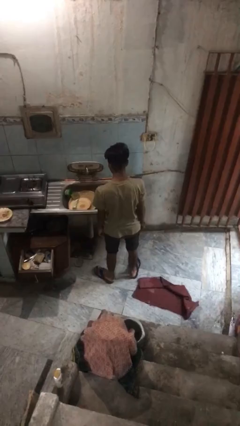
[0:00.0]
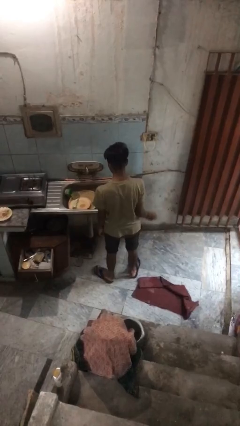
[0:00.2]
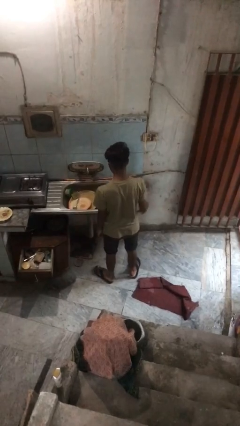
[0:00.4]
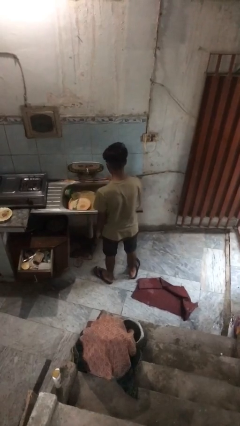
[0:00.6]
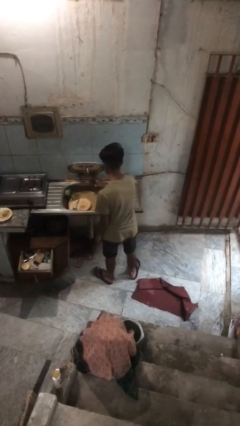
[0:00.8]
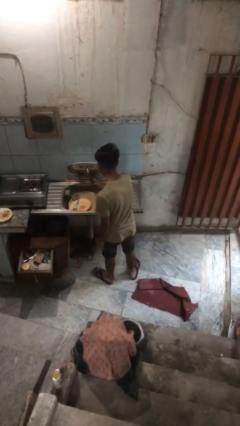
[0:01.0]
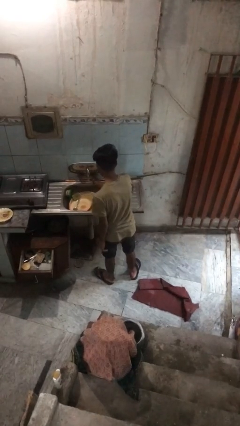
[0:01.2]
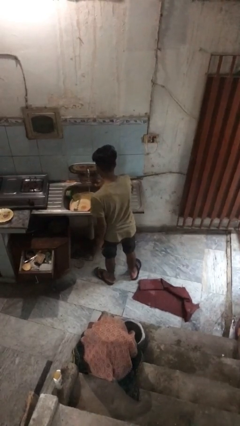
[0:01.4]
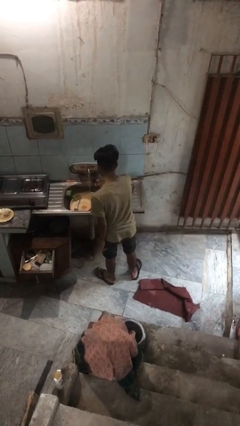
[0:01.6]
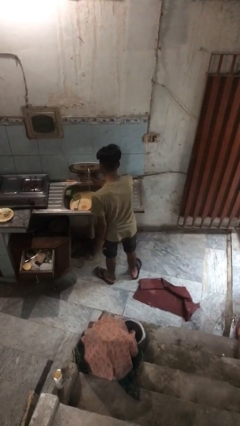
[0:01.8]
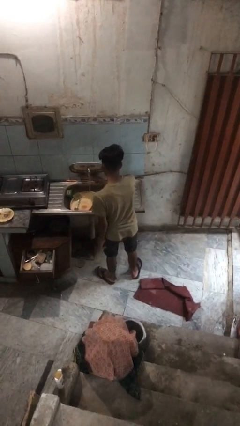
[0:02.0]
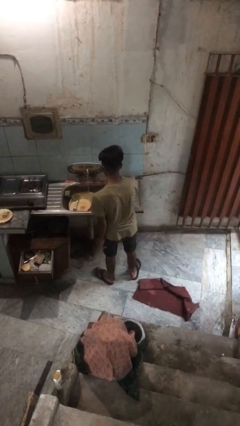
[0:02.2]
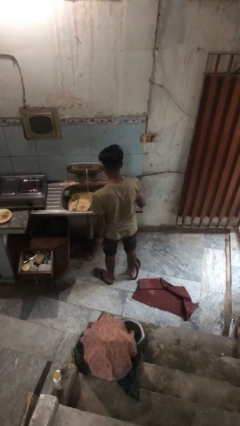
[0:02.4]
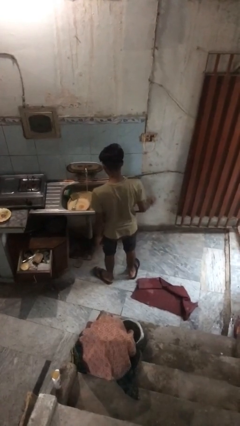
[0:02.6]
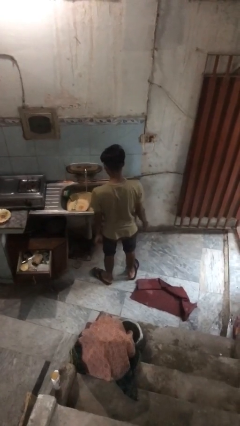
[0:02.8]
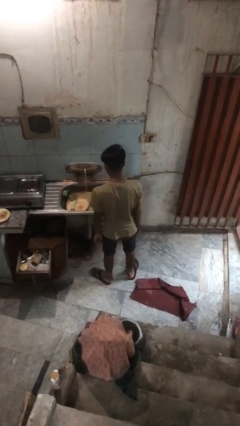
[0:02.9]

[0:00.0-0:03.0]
person turns on faucet

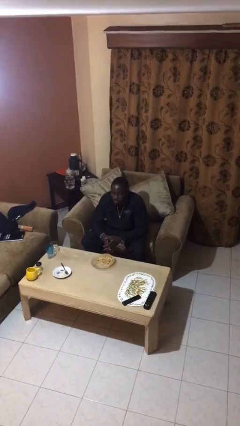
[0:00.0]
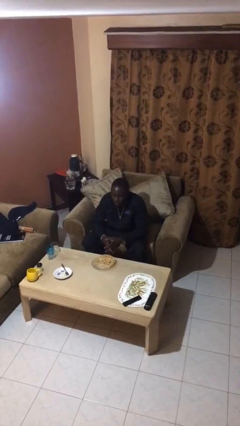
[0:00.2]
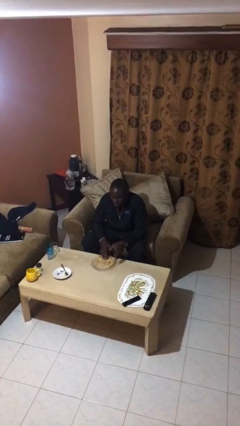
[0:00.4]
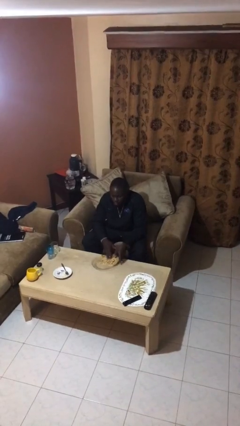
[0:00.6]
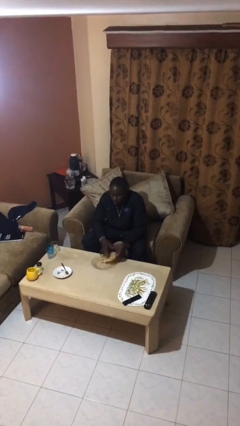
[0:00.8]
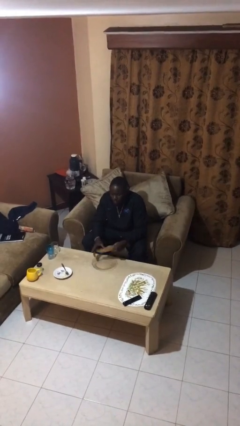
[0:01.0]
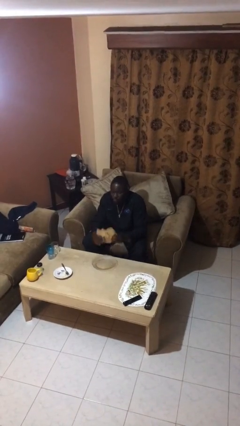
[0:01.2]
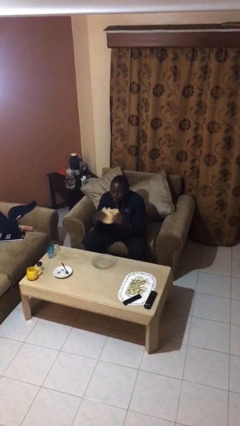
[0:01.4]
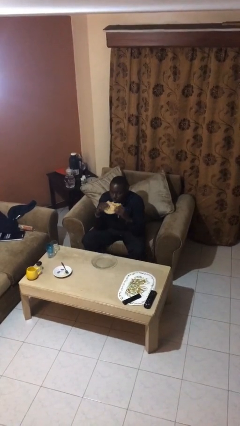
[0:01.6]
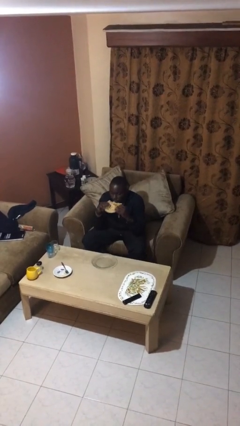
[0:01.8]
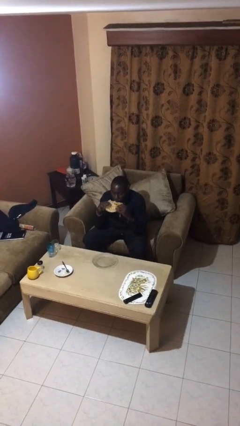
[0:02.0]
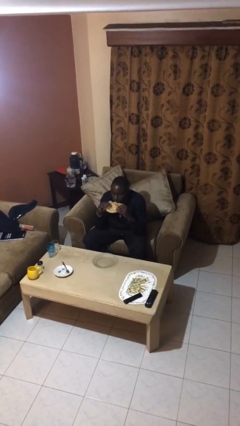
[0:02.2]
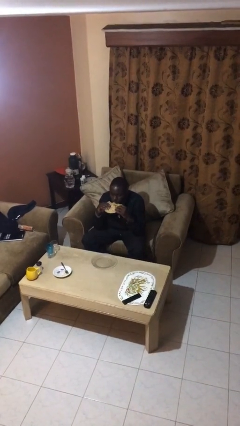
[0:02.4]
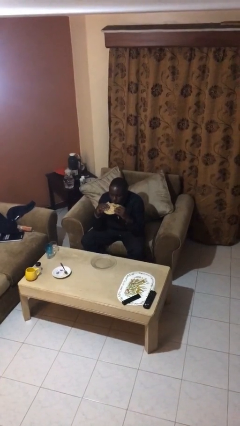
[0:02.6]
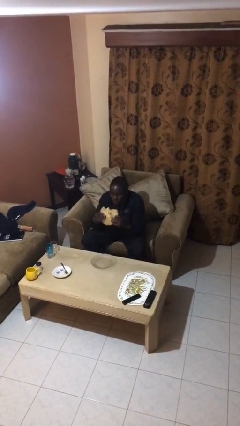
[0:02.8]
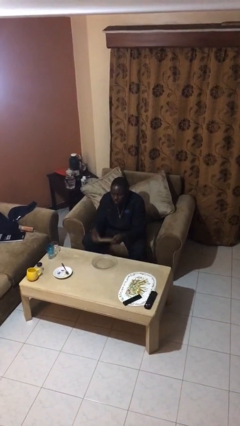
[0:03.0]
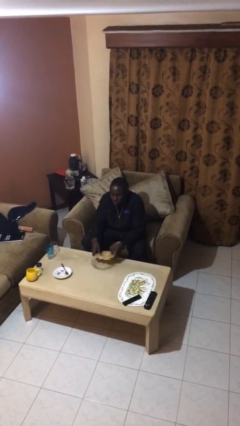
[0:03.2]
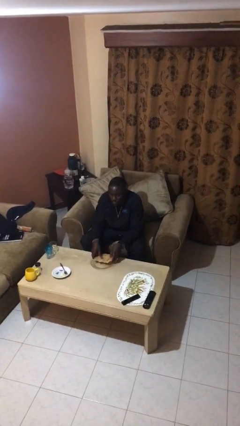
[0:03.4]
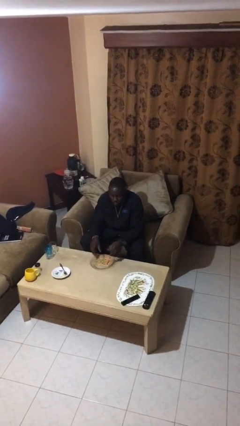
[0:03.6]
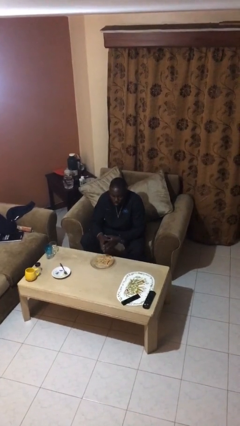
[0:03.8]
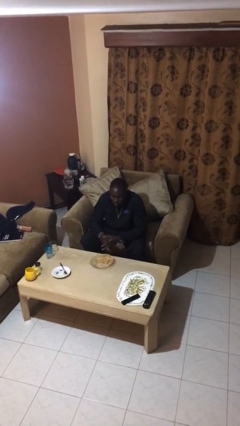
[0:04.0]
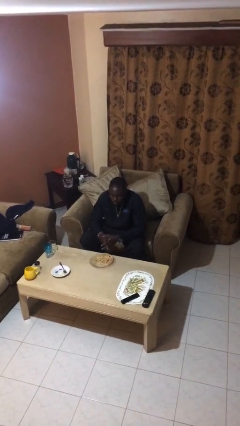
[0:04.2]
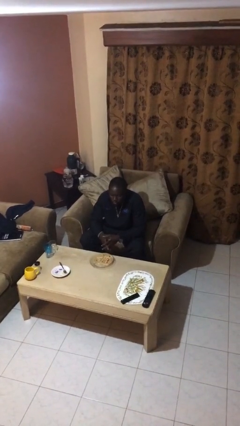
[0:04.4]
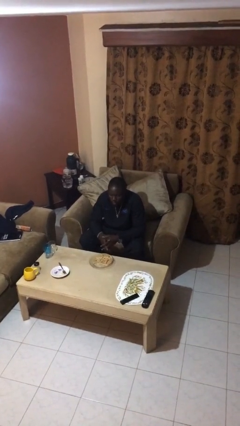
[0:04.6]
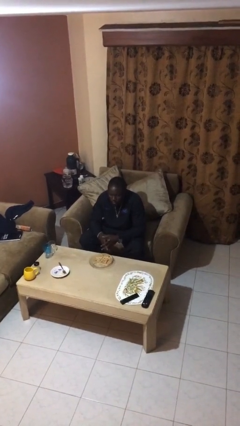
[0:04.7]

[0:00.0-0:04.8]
person eats with hands

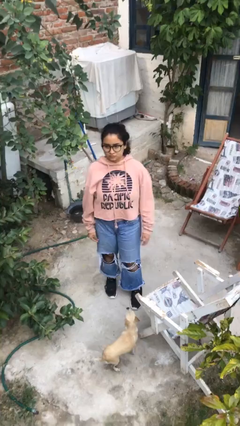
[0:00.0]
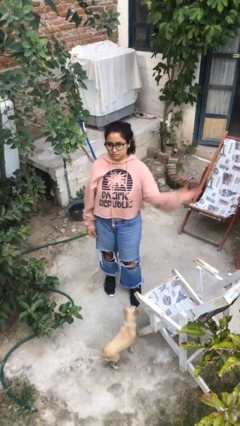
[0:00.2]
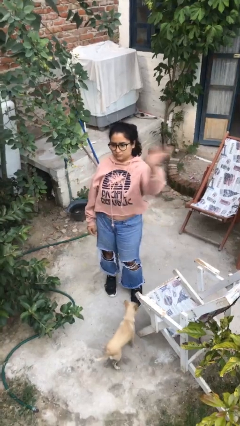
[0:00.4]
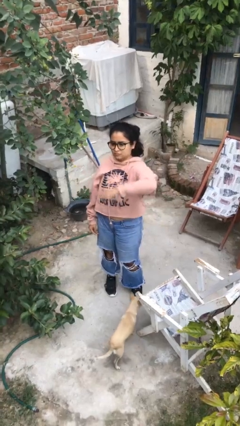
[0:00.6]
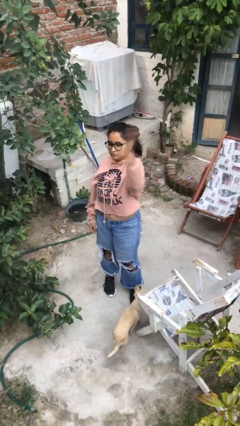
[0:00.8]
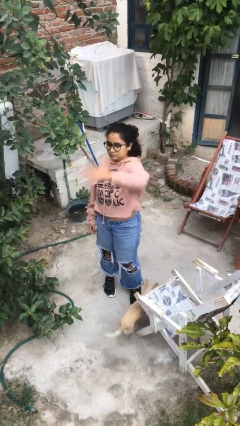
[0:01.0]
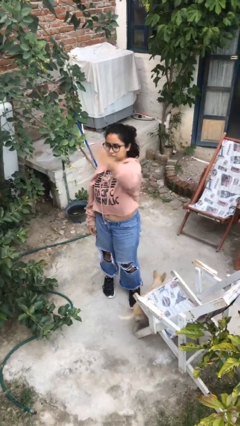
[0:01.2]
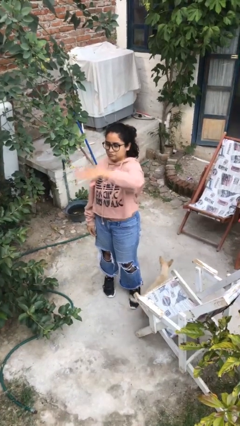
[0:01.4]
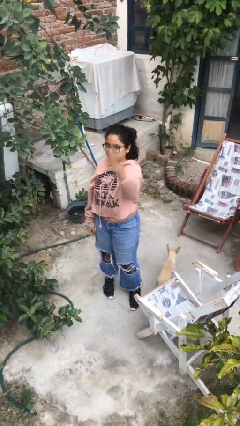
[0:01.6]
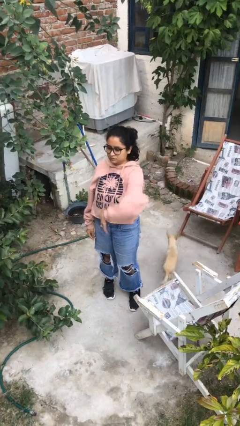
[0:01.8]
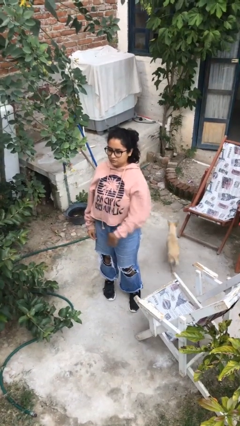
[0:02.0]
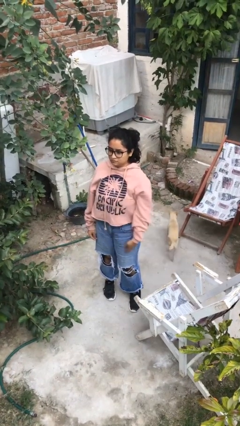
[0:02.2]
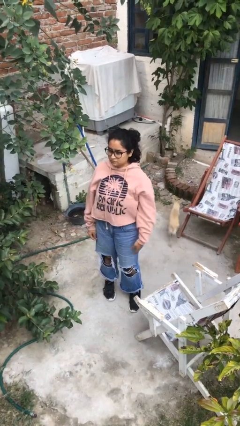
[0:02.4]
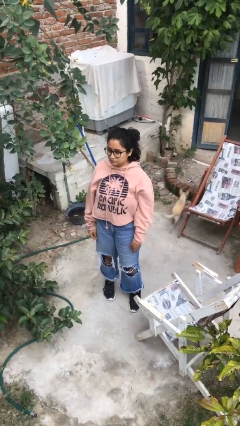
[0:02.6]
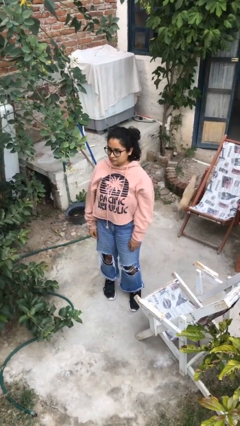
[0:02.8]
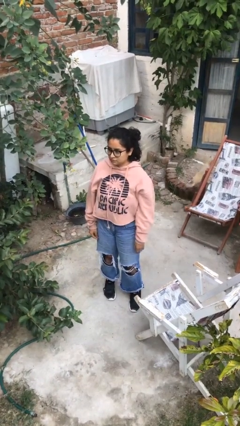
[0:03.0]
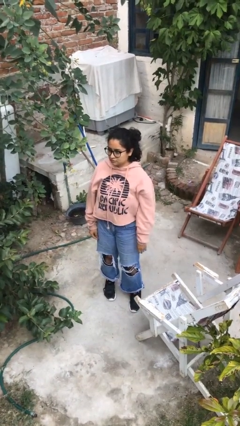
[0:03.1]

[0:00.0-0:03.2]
person punches

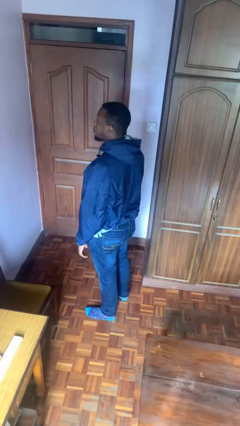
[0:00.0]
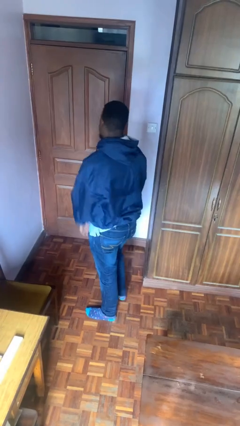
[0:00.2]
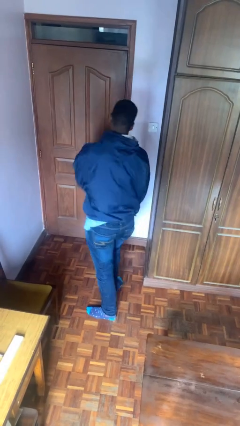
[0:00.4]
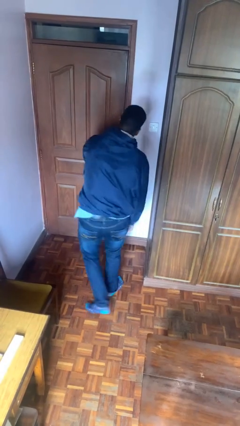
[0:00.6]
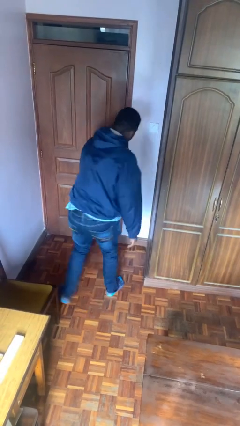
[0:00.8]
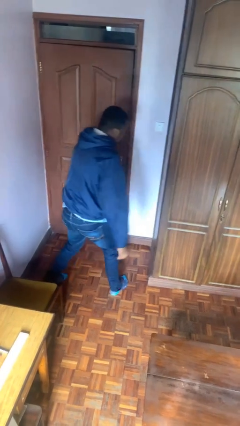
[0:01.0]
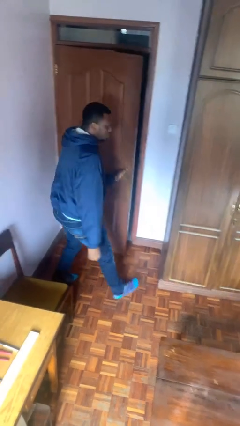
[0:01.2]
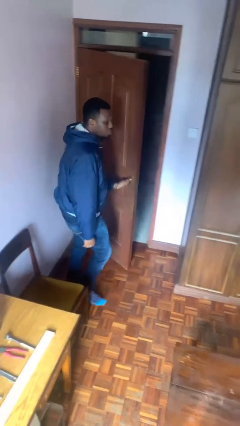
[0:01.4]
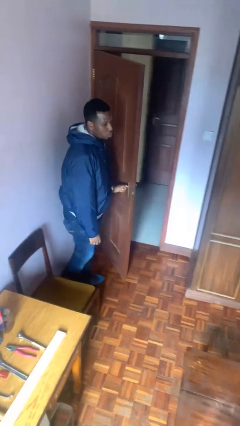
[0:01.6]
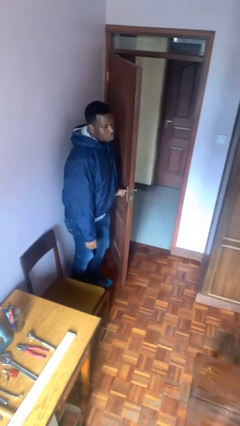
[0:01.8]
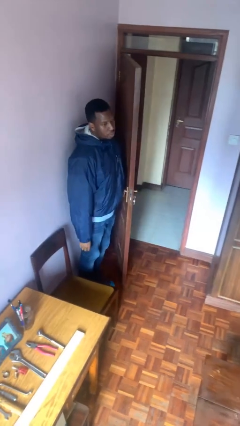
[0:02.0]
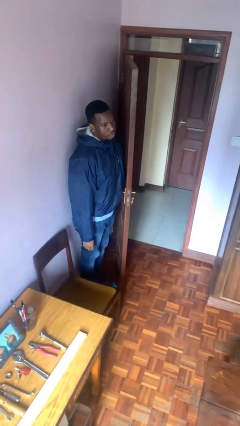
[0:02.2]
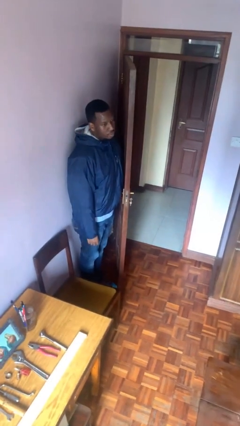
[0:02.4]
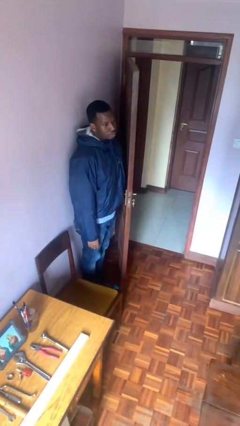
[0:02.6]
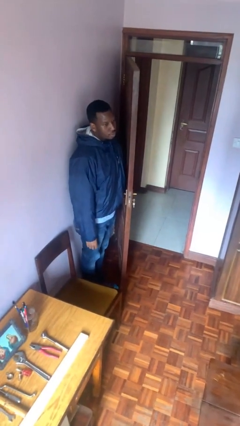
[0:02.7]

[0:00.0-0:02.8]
person opens facility door

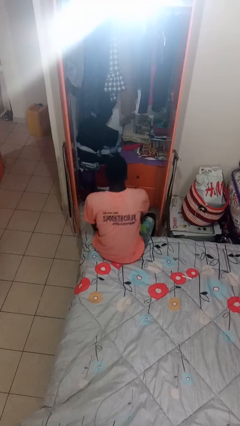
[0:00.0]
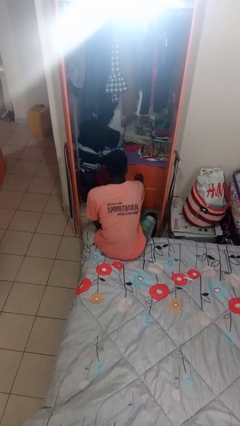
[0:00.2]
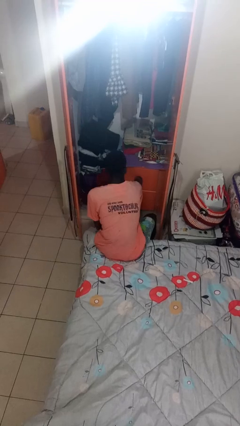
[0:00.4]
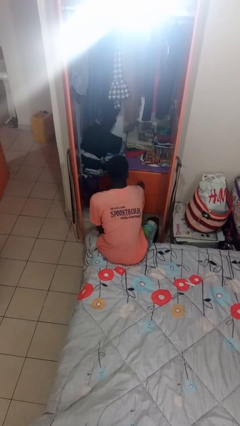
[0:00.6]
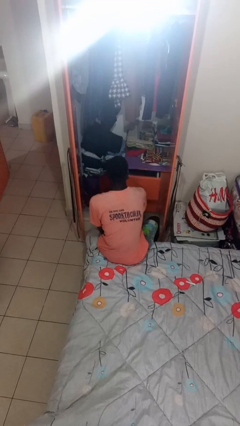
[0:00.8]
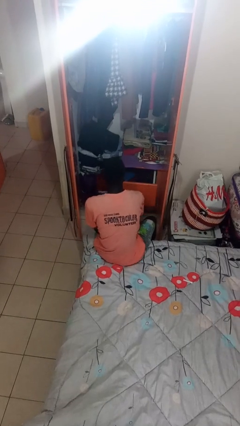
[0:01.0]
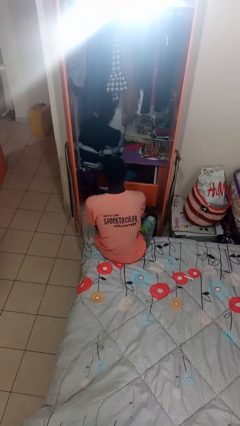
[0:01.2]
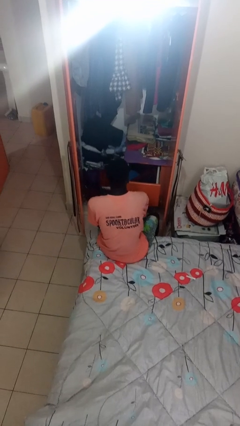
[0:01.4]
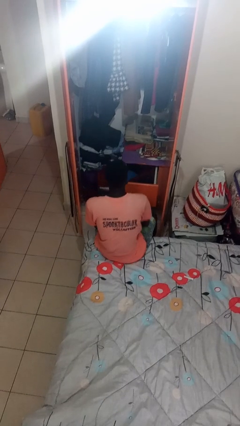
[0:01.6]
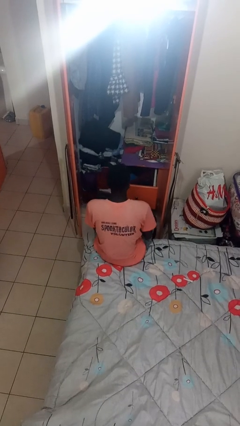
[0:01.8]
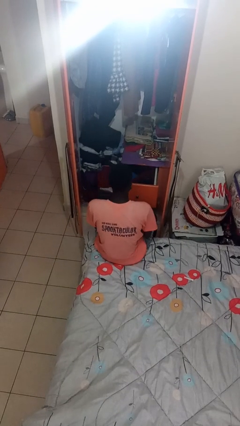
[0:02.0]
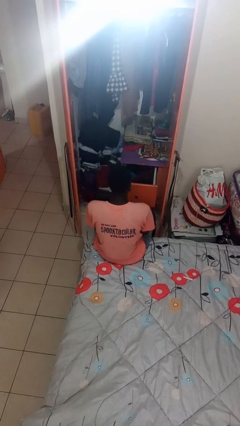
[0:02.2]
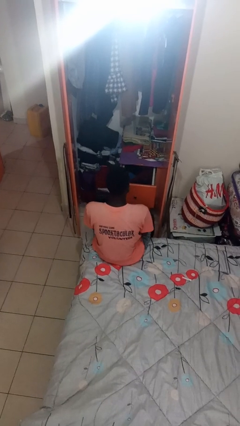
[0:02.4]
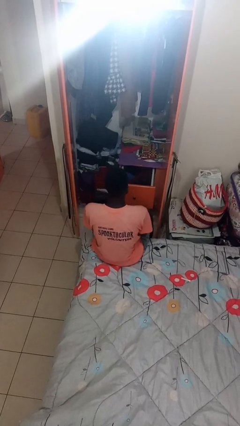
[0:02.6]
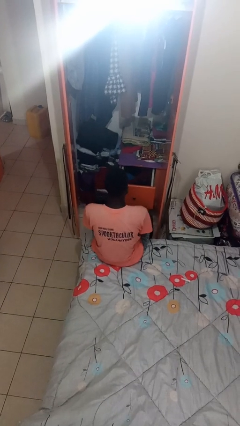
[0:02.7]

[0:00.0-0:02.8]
person opens dresser drawer

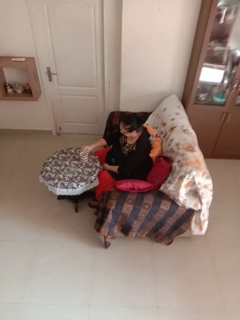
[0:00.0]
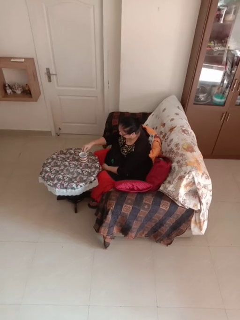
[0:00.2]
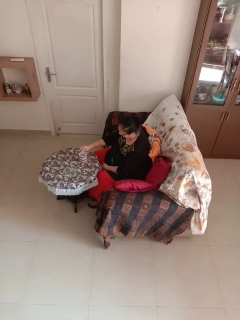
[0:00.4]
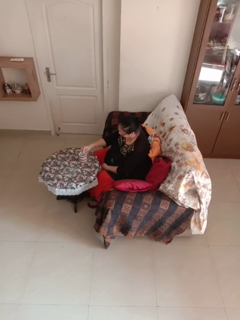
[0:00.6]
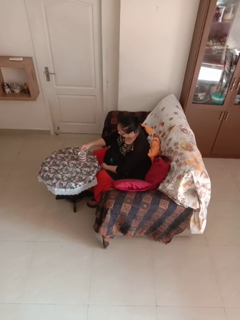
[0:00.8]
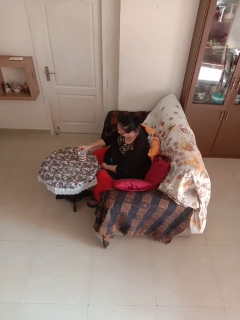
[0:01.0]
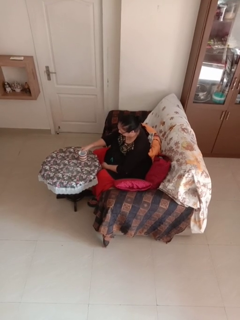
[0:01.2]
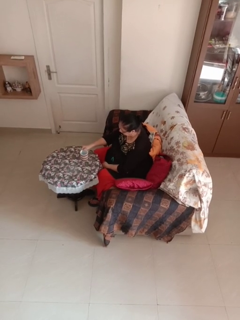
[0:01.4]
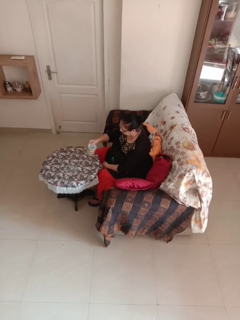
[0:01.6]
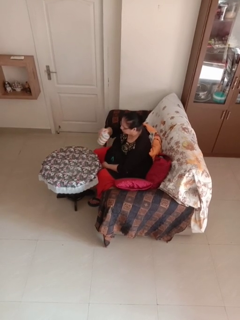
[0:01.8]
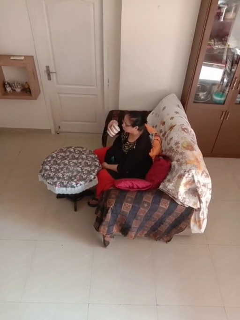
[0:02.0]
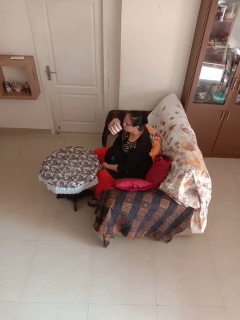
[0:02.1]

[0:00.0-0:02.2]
person stirs mug
